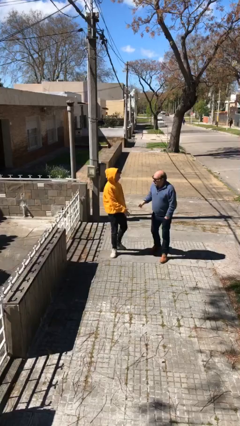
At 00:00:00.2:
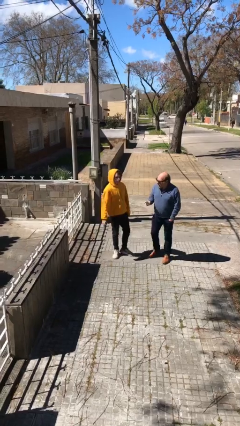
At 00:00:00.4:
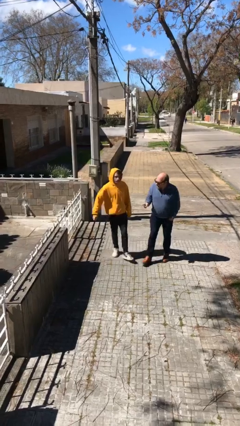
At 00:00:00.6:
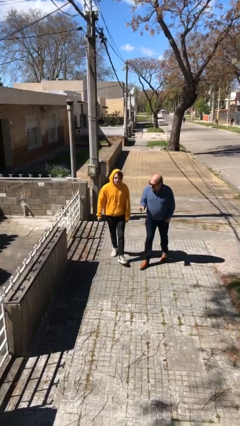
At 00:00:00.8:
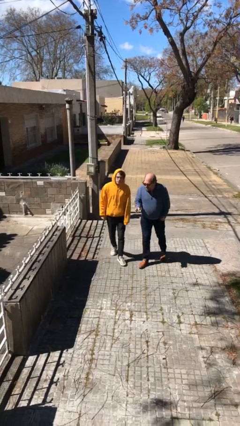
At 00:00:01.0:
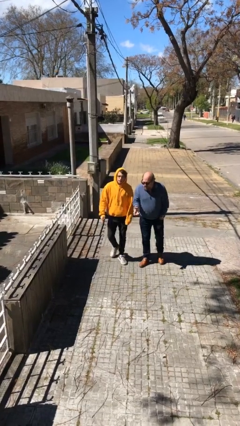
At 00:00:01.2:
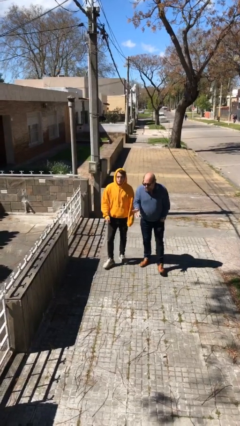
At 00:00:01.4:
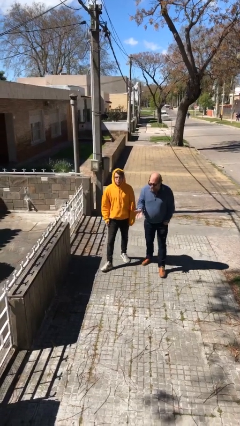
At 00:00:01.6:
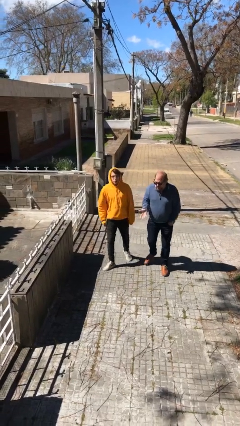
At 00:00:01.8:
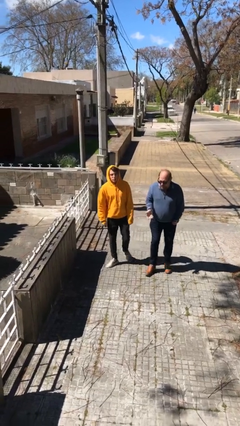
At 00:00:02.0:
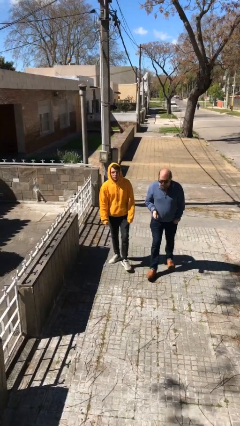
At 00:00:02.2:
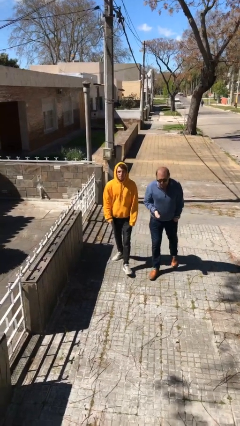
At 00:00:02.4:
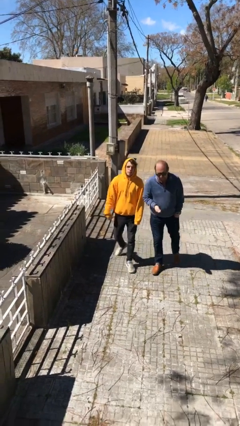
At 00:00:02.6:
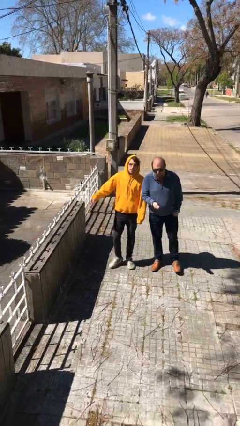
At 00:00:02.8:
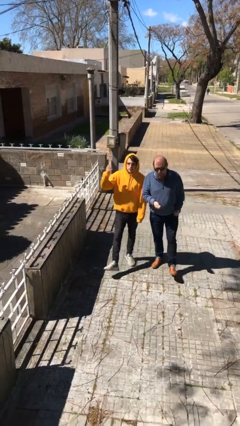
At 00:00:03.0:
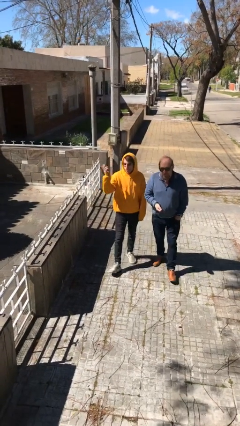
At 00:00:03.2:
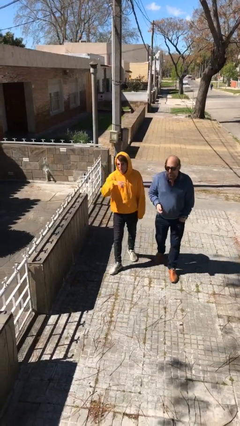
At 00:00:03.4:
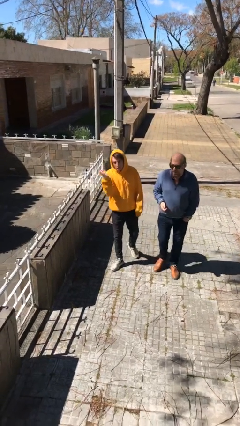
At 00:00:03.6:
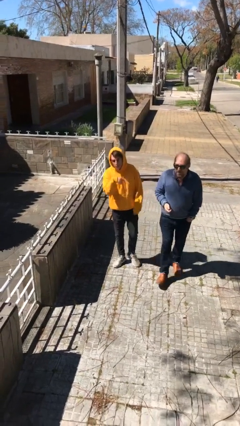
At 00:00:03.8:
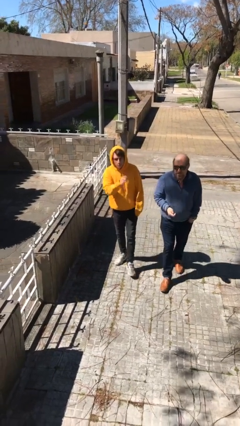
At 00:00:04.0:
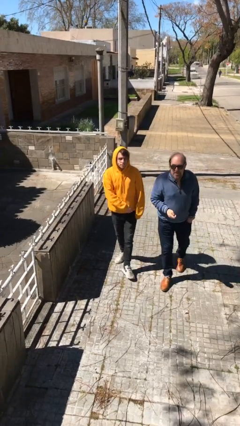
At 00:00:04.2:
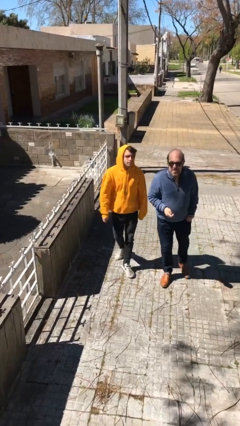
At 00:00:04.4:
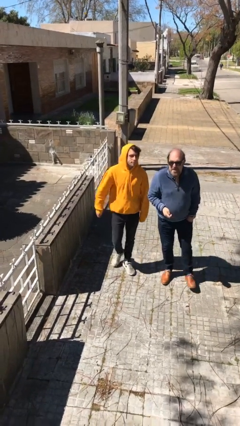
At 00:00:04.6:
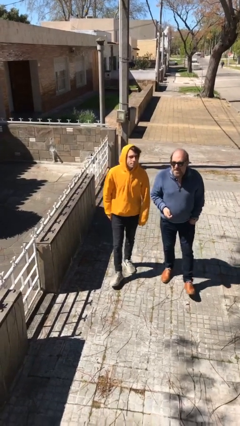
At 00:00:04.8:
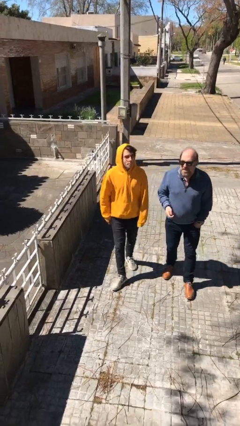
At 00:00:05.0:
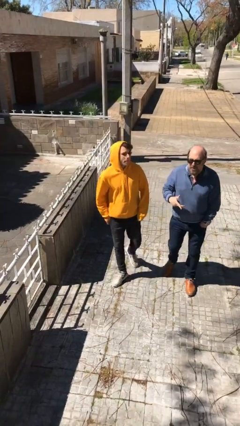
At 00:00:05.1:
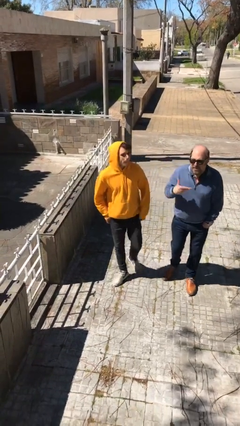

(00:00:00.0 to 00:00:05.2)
person talks to person

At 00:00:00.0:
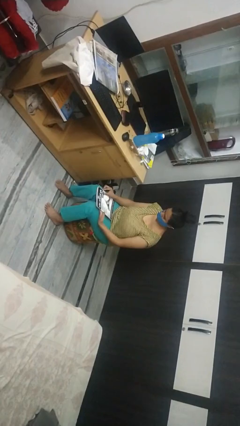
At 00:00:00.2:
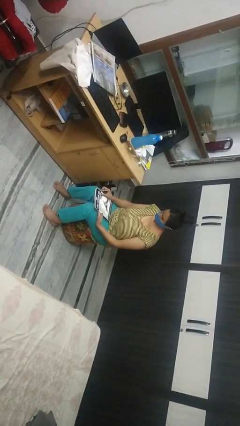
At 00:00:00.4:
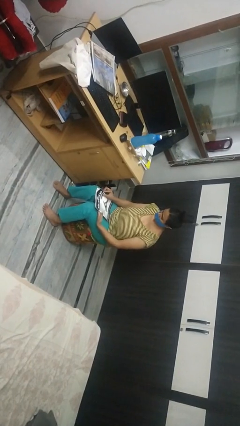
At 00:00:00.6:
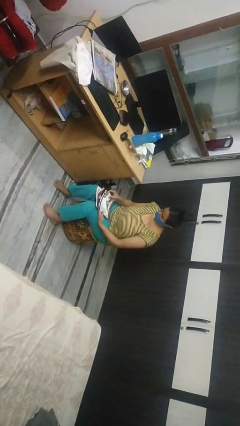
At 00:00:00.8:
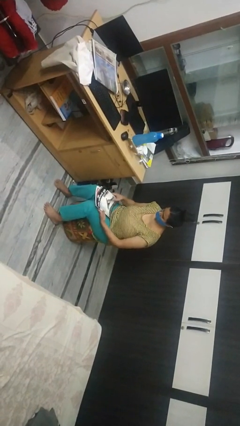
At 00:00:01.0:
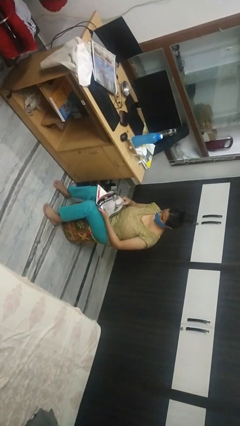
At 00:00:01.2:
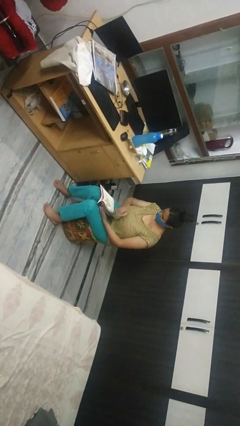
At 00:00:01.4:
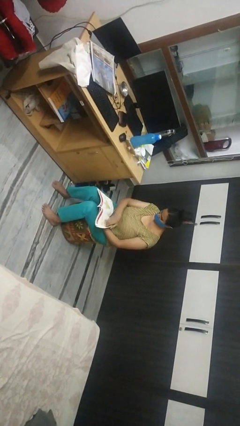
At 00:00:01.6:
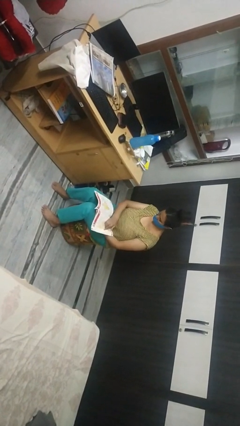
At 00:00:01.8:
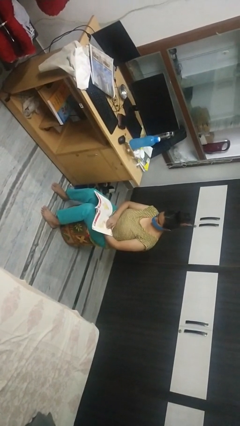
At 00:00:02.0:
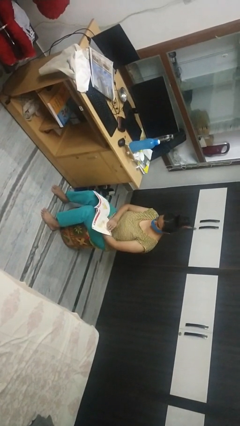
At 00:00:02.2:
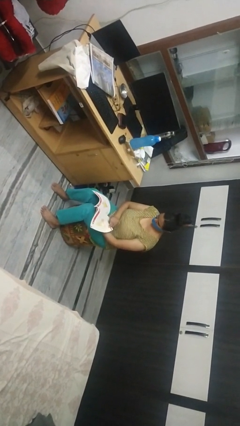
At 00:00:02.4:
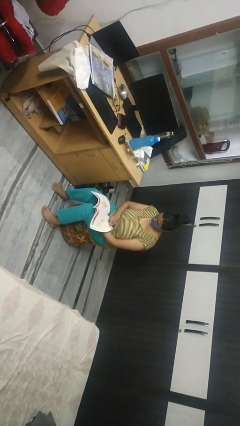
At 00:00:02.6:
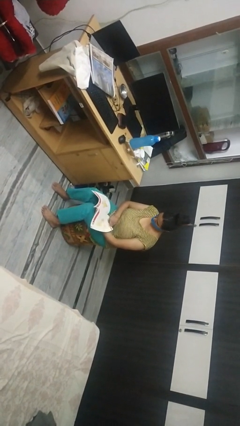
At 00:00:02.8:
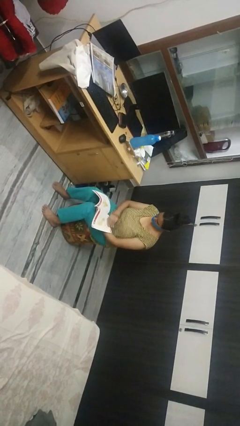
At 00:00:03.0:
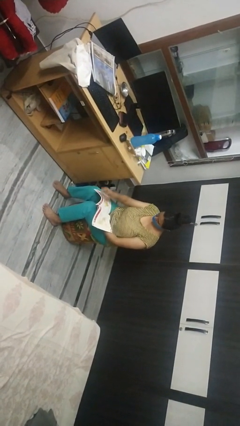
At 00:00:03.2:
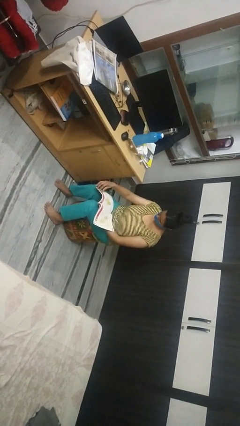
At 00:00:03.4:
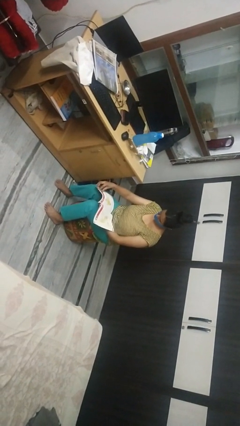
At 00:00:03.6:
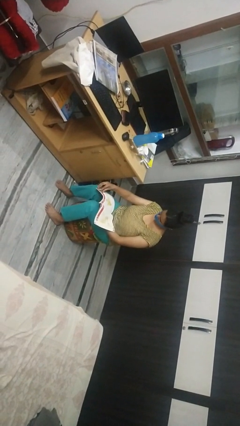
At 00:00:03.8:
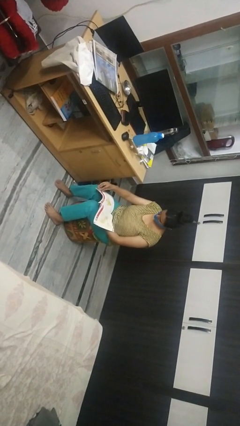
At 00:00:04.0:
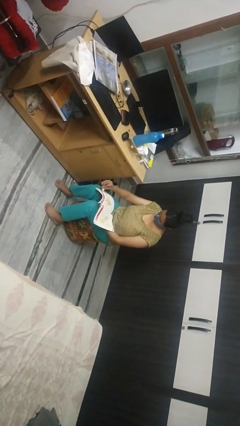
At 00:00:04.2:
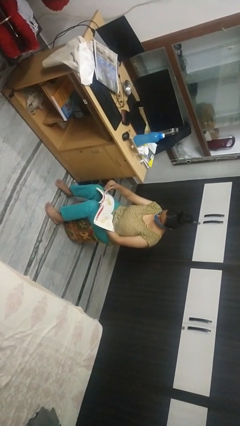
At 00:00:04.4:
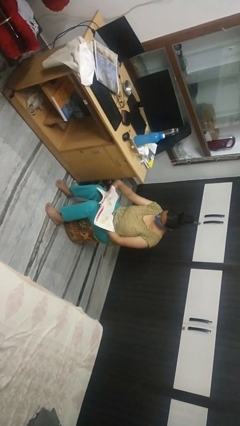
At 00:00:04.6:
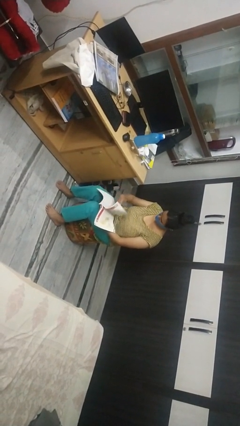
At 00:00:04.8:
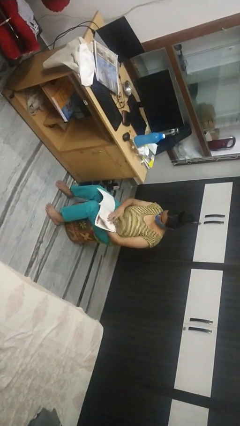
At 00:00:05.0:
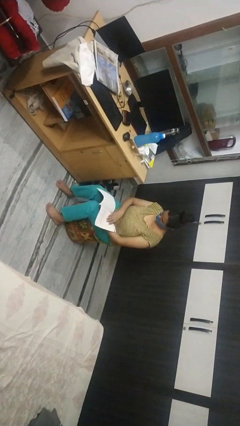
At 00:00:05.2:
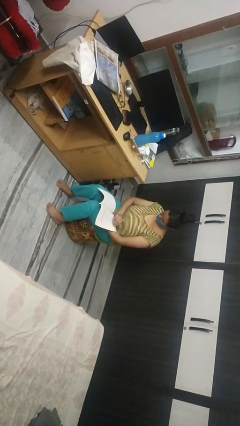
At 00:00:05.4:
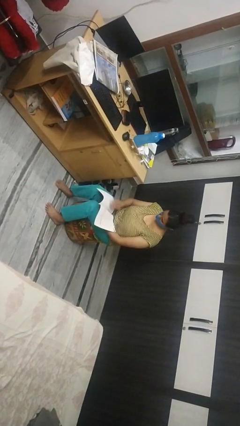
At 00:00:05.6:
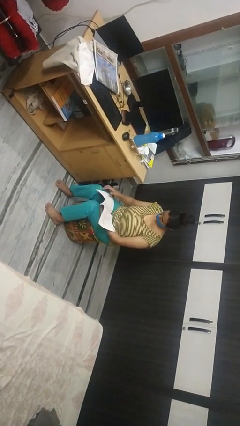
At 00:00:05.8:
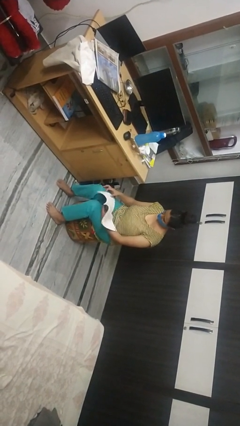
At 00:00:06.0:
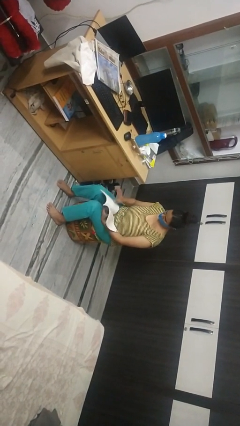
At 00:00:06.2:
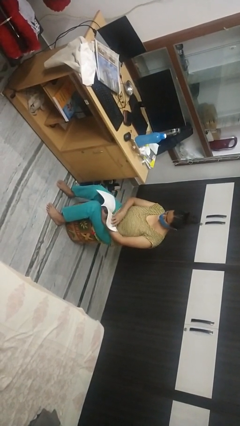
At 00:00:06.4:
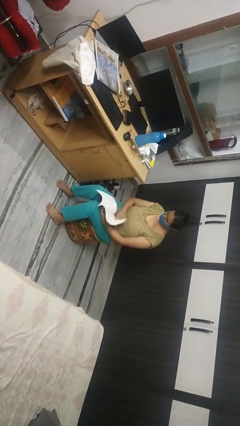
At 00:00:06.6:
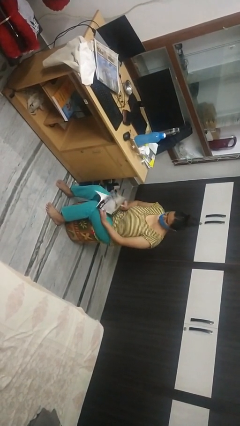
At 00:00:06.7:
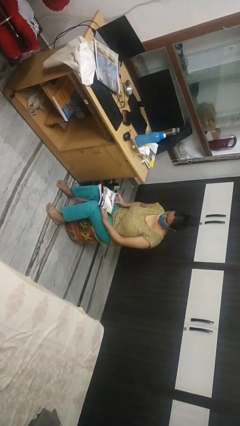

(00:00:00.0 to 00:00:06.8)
person reads magazine

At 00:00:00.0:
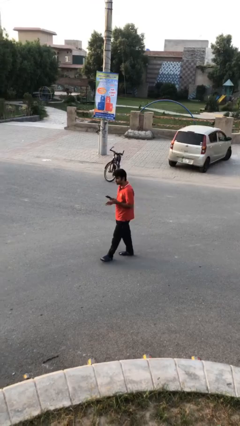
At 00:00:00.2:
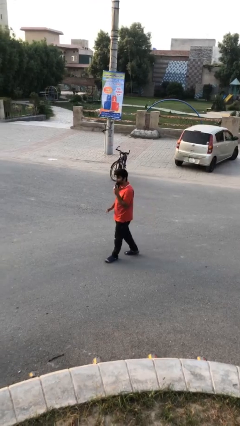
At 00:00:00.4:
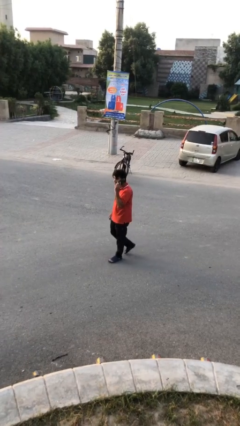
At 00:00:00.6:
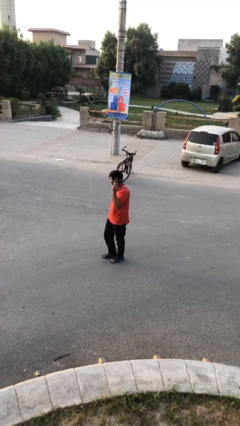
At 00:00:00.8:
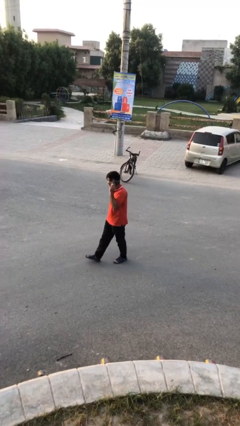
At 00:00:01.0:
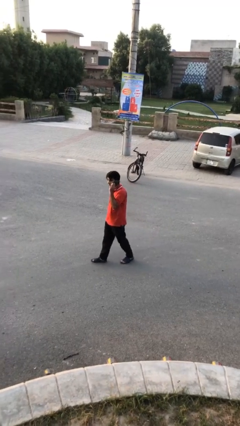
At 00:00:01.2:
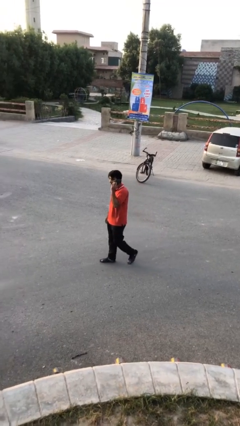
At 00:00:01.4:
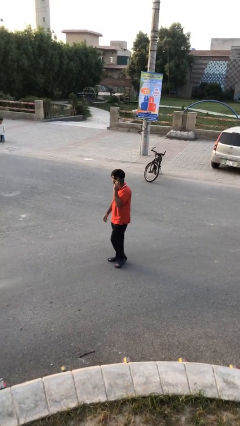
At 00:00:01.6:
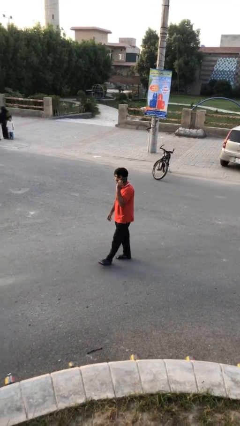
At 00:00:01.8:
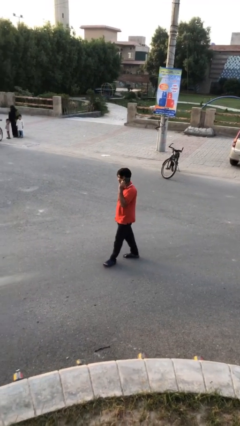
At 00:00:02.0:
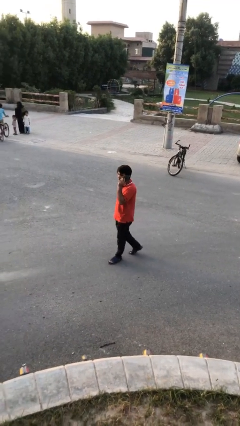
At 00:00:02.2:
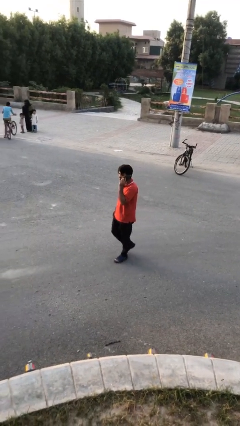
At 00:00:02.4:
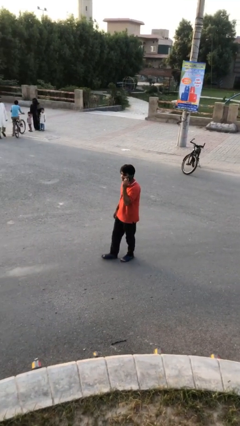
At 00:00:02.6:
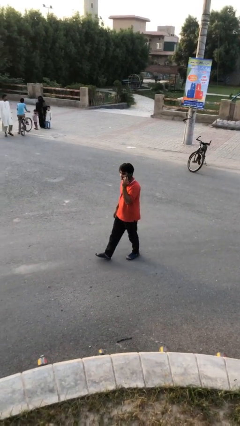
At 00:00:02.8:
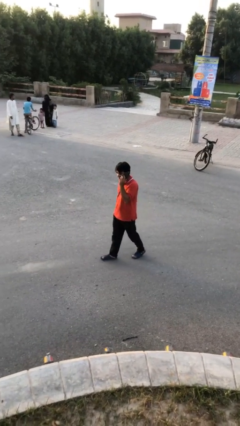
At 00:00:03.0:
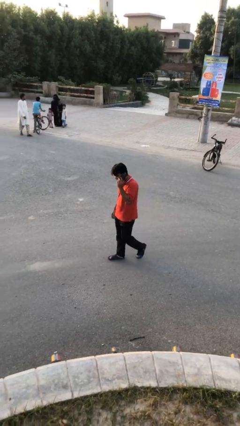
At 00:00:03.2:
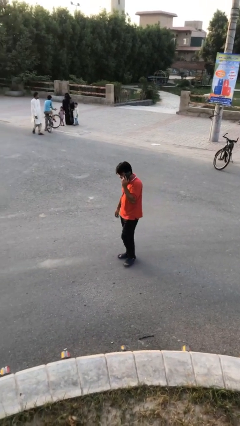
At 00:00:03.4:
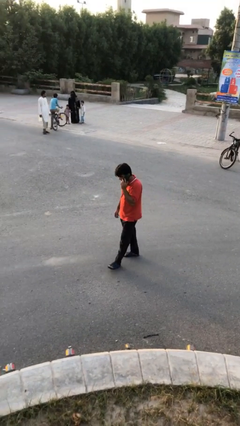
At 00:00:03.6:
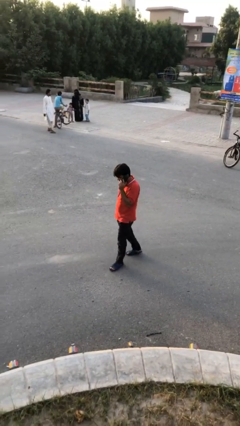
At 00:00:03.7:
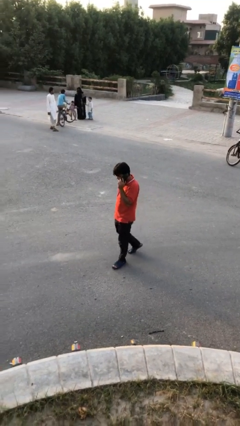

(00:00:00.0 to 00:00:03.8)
person talks on phone

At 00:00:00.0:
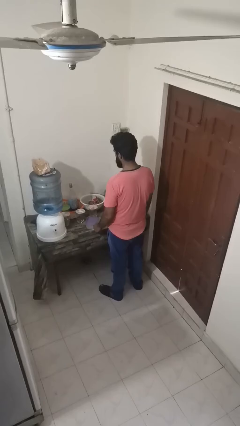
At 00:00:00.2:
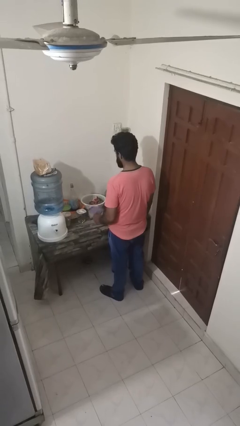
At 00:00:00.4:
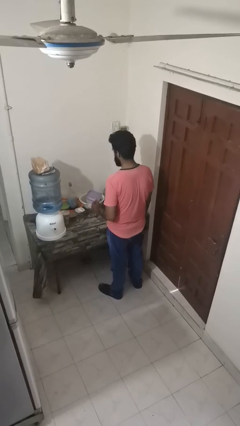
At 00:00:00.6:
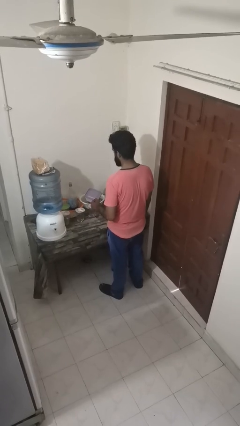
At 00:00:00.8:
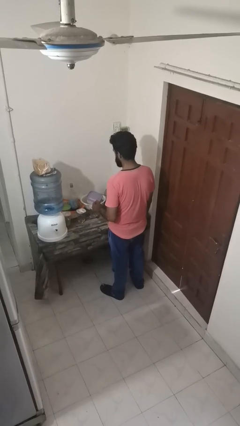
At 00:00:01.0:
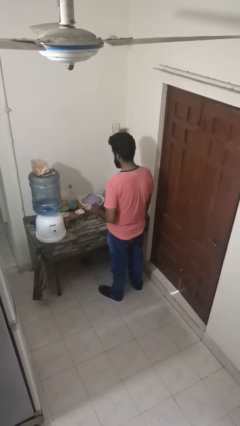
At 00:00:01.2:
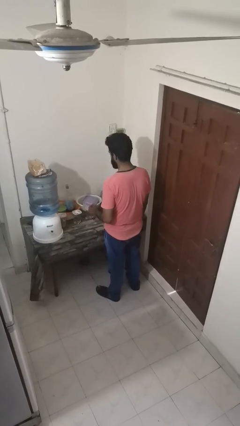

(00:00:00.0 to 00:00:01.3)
person picks up object from countertop

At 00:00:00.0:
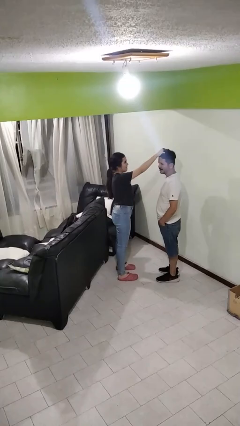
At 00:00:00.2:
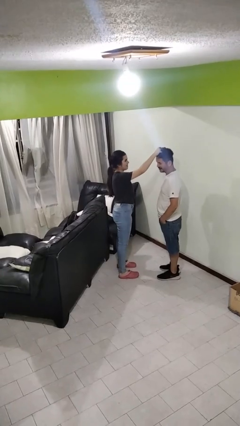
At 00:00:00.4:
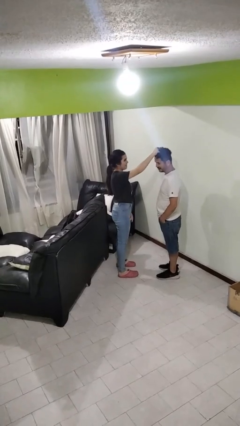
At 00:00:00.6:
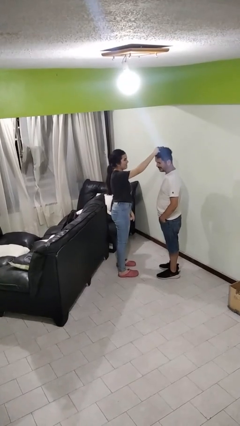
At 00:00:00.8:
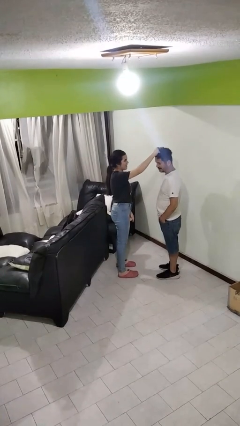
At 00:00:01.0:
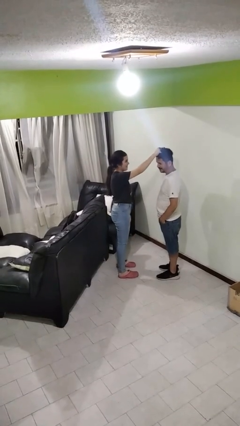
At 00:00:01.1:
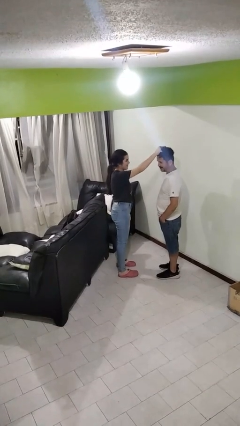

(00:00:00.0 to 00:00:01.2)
person grabs person by hair
